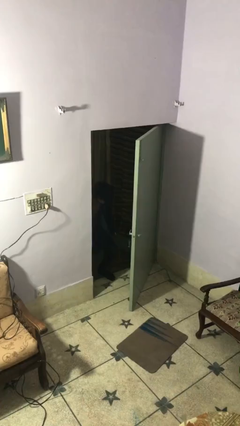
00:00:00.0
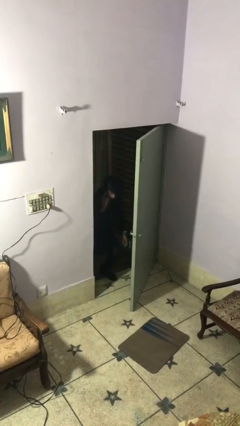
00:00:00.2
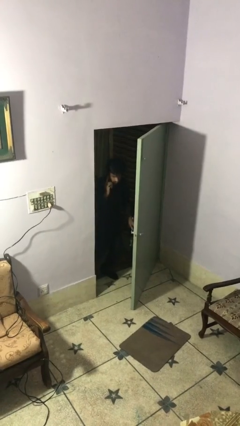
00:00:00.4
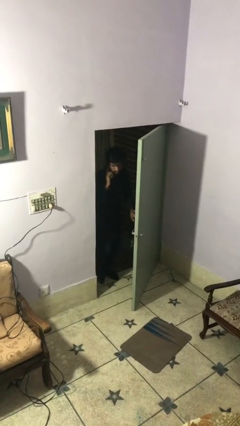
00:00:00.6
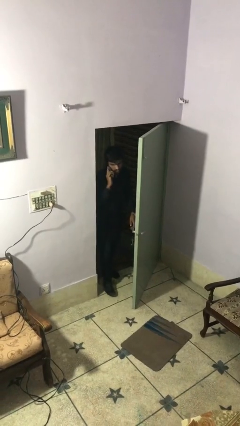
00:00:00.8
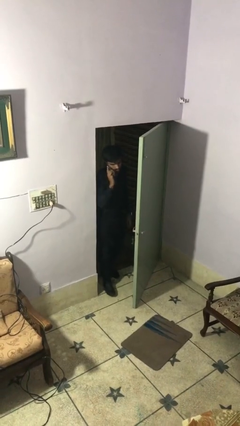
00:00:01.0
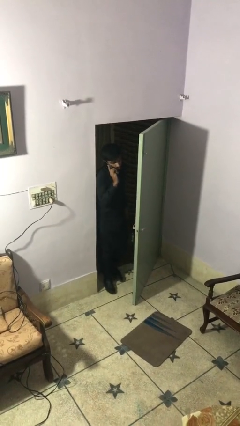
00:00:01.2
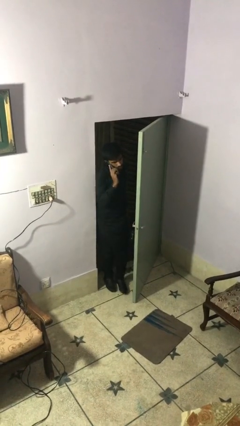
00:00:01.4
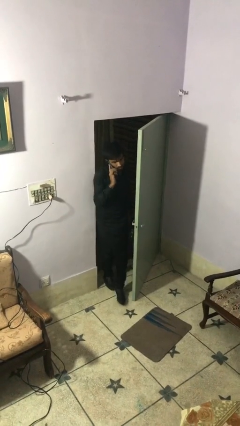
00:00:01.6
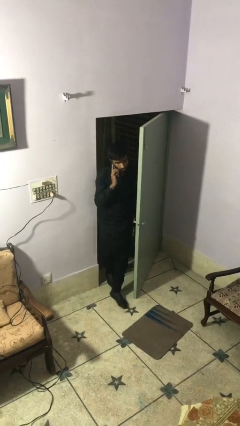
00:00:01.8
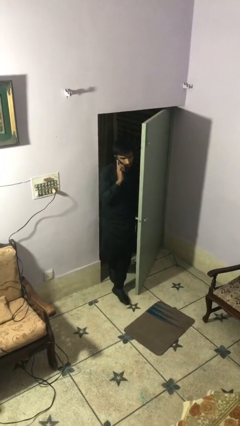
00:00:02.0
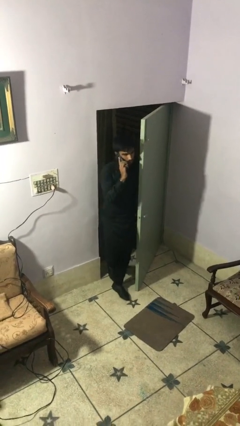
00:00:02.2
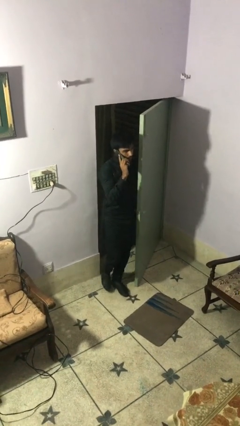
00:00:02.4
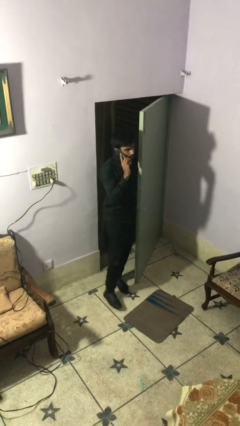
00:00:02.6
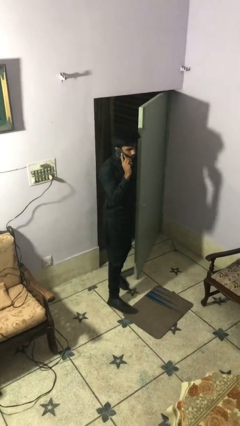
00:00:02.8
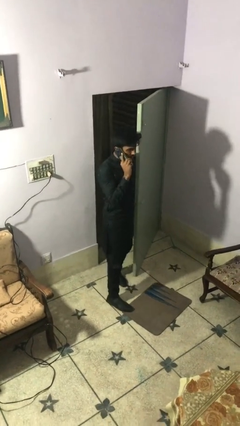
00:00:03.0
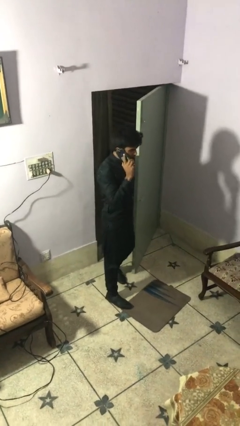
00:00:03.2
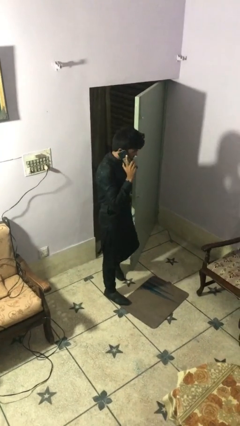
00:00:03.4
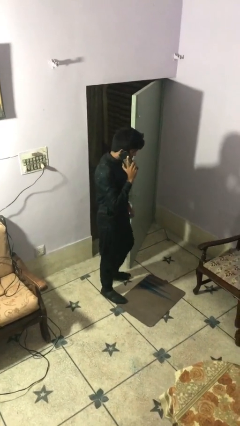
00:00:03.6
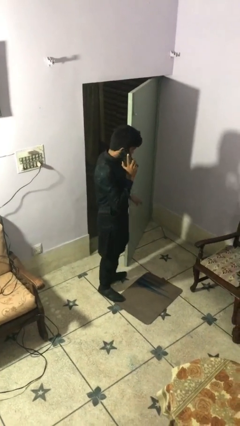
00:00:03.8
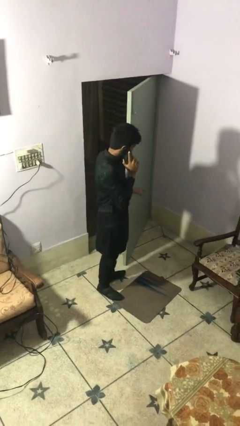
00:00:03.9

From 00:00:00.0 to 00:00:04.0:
person enters scene through structure

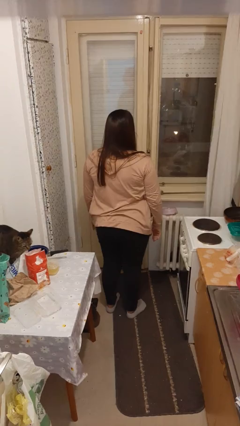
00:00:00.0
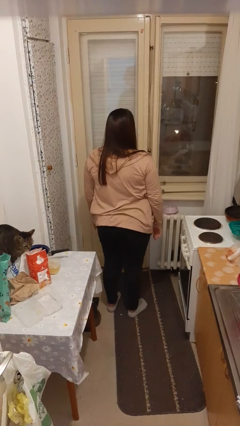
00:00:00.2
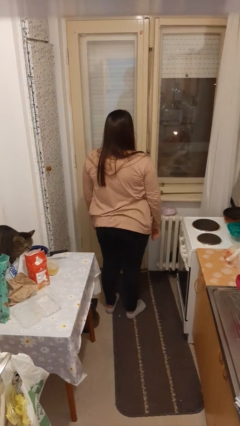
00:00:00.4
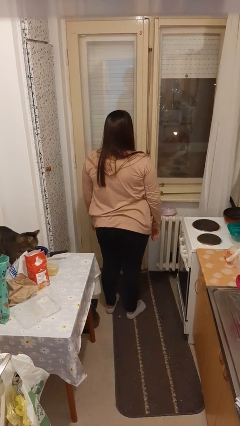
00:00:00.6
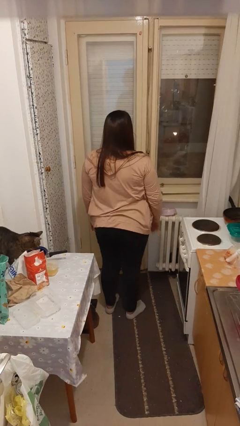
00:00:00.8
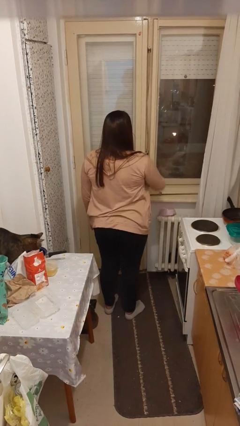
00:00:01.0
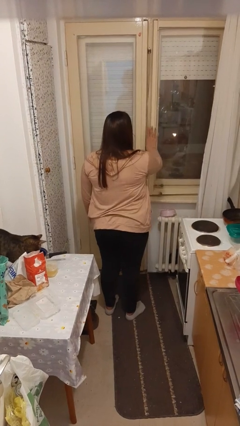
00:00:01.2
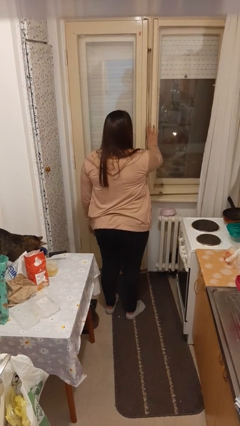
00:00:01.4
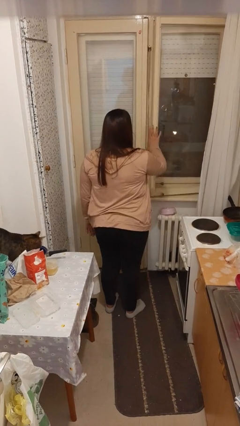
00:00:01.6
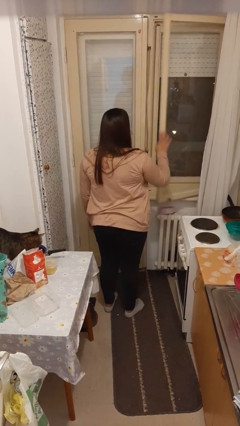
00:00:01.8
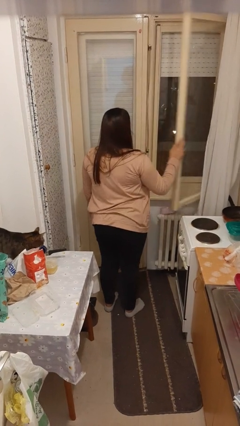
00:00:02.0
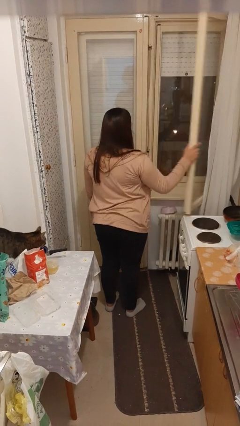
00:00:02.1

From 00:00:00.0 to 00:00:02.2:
person opens home window

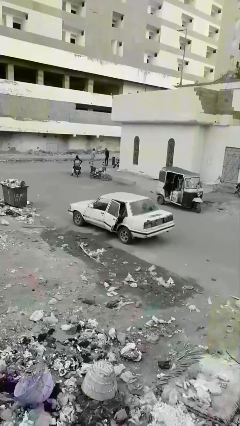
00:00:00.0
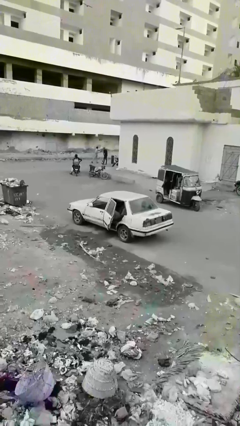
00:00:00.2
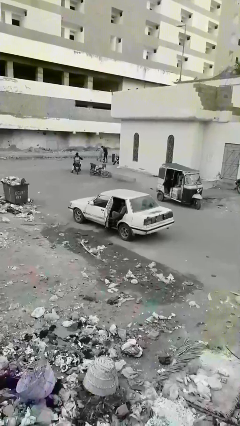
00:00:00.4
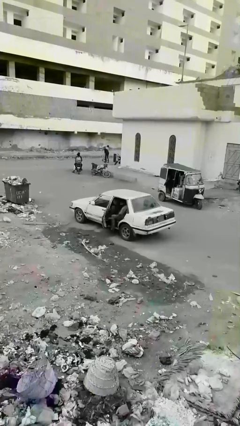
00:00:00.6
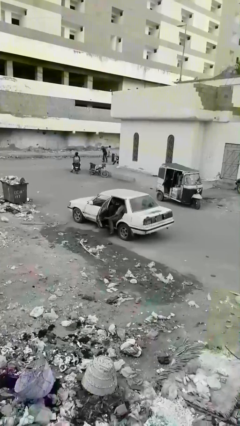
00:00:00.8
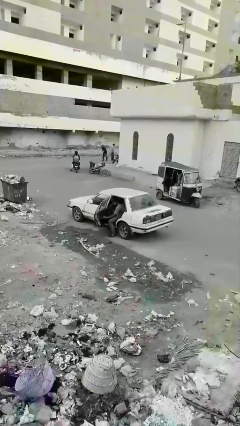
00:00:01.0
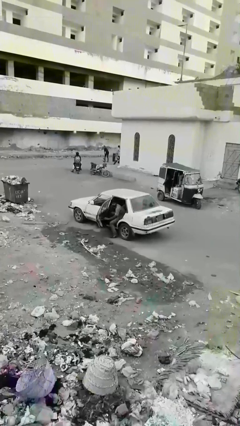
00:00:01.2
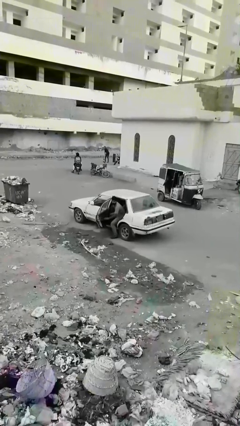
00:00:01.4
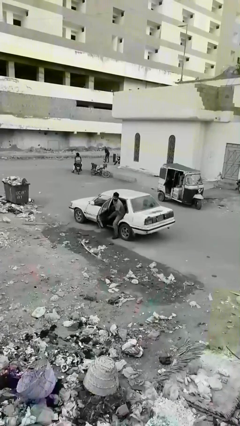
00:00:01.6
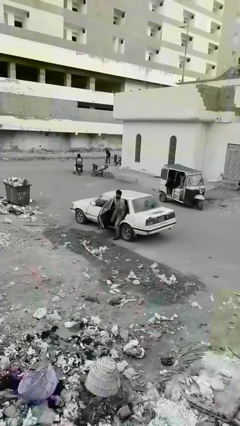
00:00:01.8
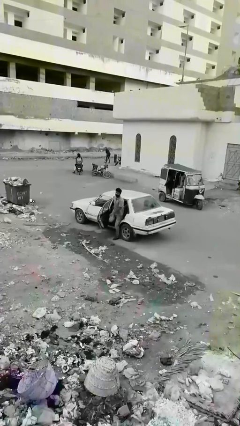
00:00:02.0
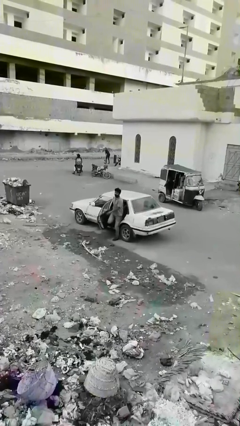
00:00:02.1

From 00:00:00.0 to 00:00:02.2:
car drops off person

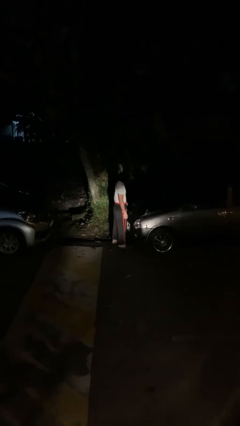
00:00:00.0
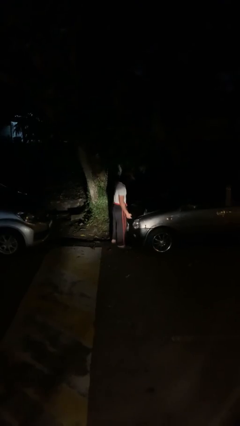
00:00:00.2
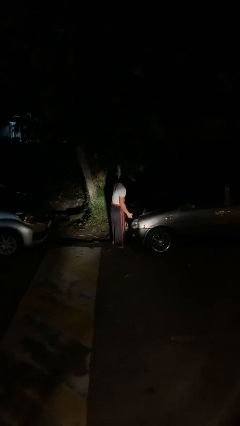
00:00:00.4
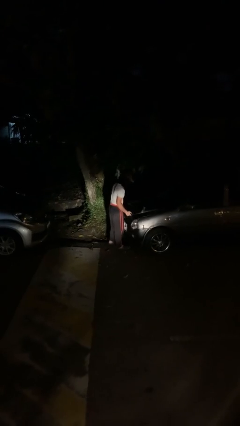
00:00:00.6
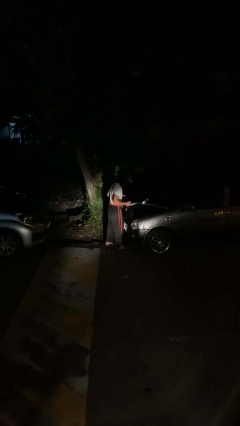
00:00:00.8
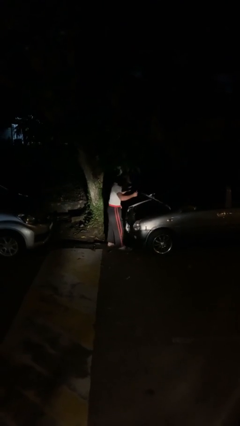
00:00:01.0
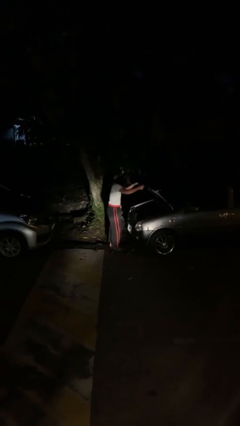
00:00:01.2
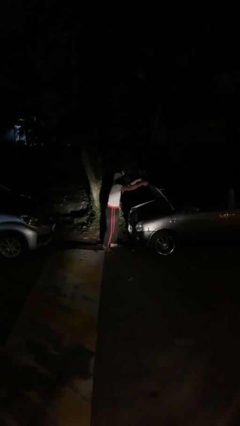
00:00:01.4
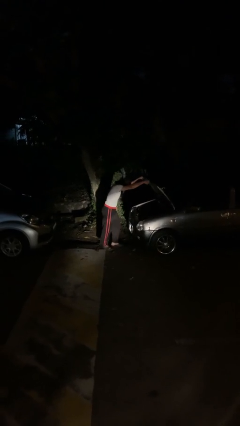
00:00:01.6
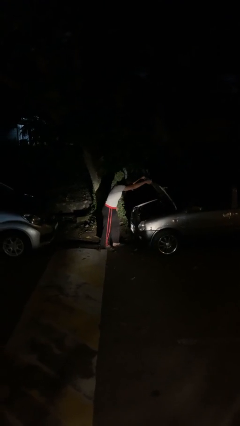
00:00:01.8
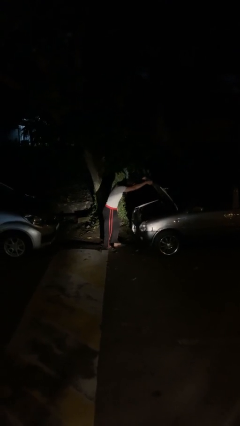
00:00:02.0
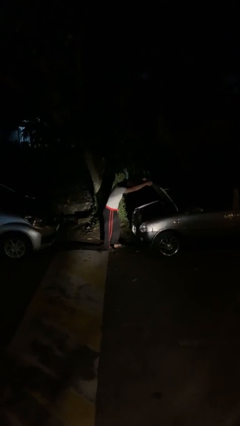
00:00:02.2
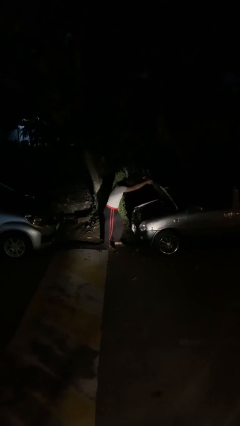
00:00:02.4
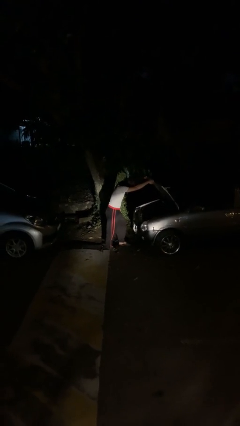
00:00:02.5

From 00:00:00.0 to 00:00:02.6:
person opens car hood

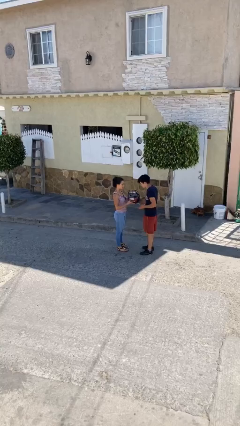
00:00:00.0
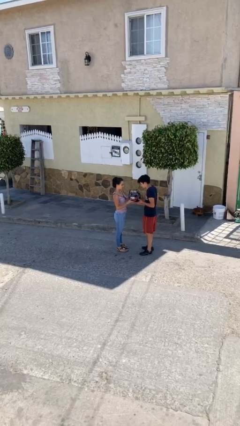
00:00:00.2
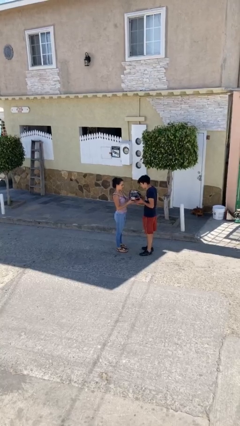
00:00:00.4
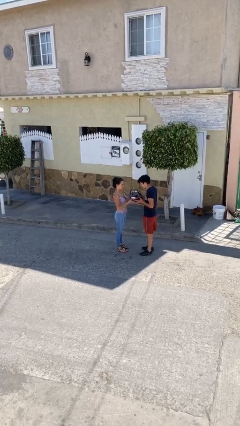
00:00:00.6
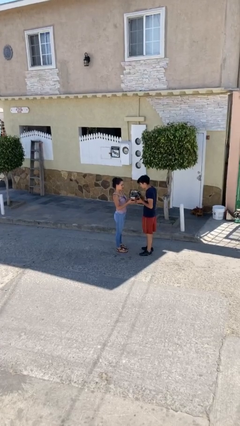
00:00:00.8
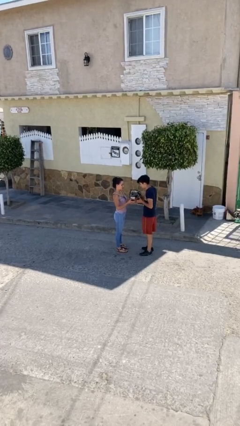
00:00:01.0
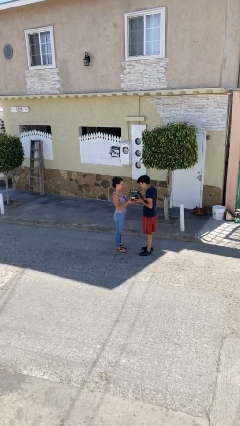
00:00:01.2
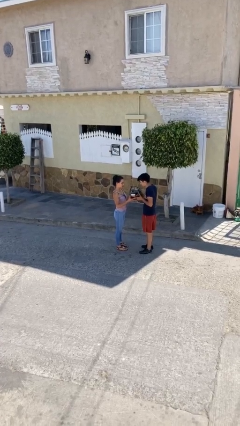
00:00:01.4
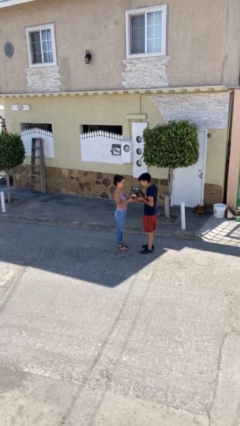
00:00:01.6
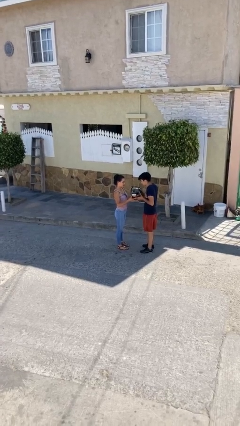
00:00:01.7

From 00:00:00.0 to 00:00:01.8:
person transfers object to person

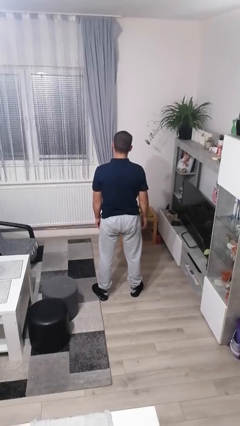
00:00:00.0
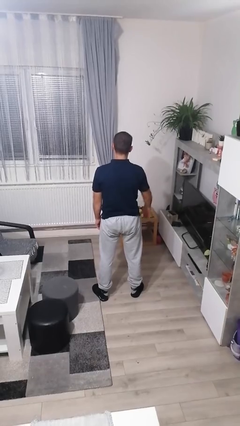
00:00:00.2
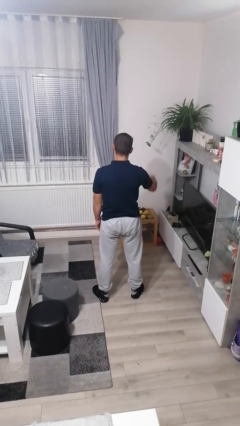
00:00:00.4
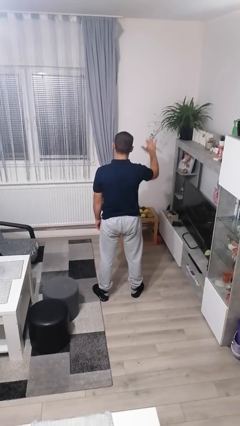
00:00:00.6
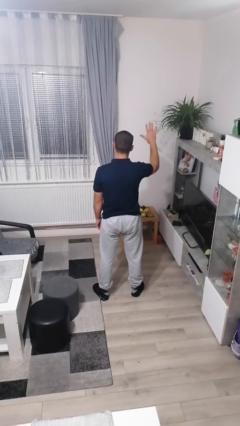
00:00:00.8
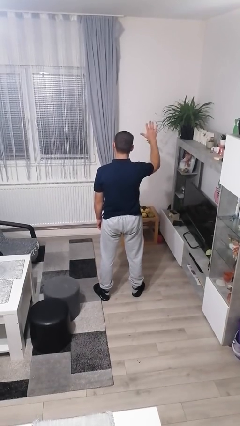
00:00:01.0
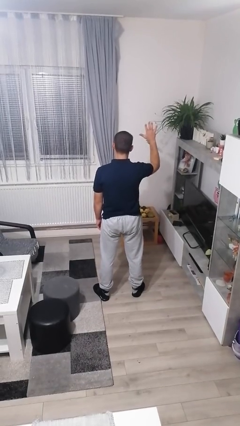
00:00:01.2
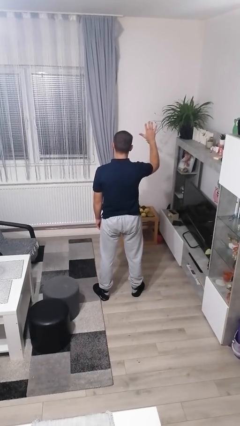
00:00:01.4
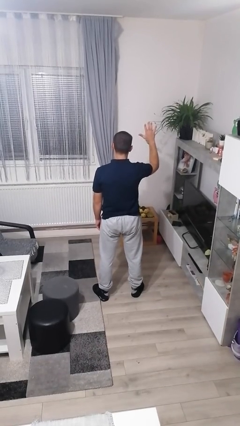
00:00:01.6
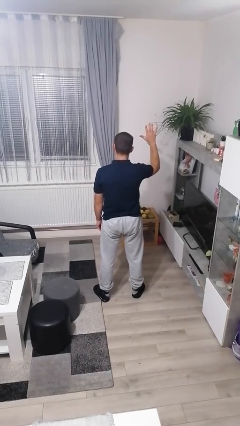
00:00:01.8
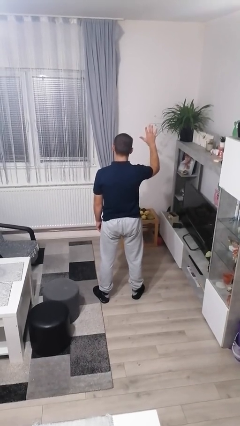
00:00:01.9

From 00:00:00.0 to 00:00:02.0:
person gestures number five

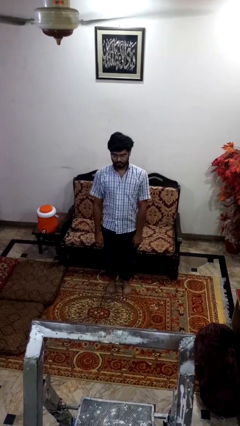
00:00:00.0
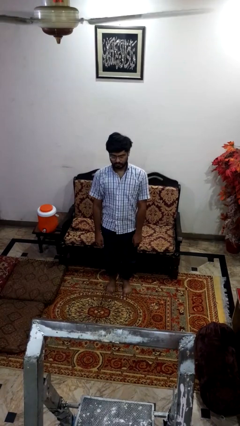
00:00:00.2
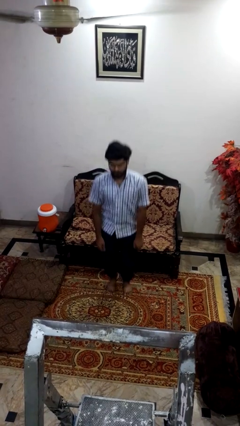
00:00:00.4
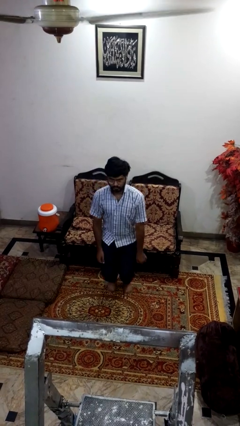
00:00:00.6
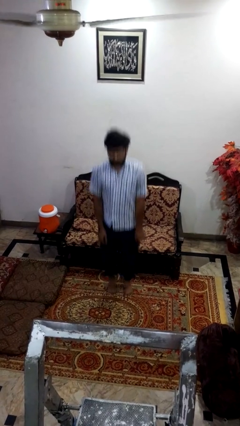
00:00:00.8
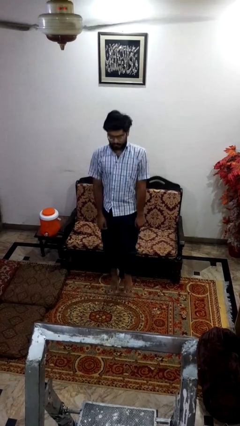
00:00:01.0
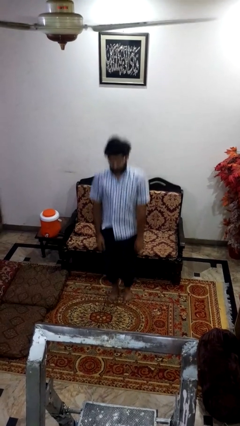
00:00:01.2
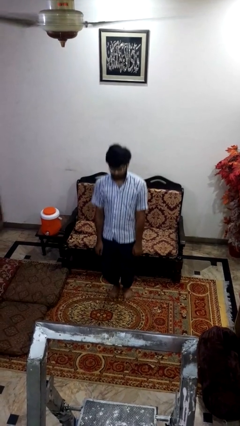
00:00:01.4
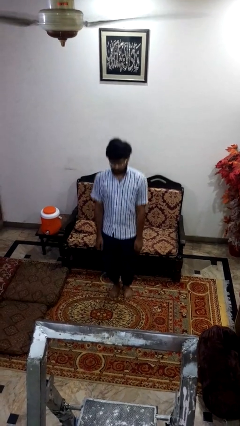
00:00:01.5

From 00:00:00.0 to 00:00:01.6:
person jumps

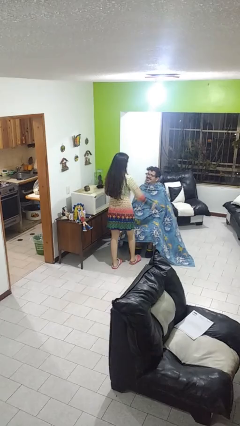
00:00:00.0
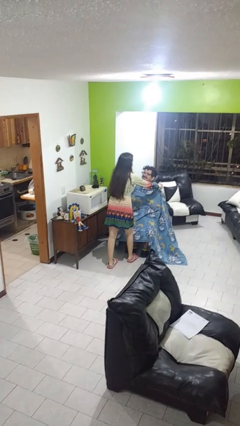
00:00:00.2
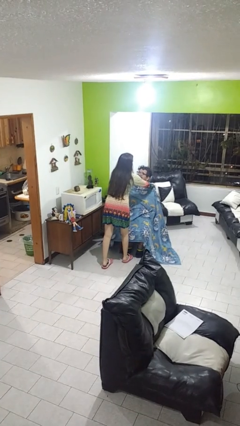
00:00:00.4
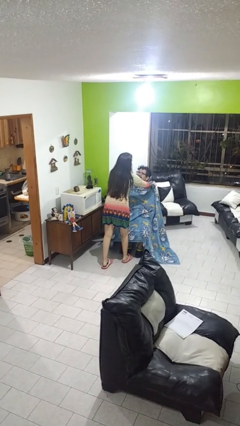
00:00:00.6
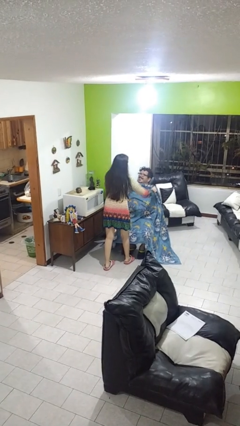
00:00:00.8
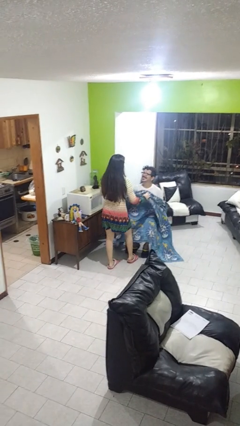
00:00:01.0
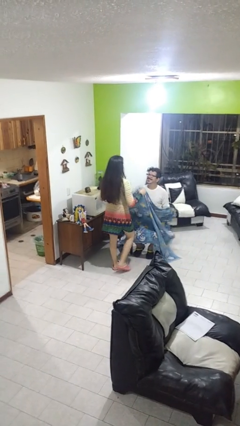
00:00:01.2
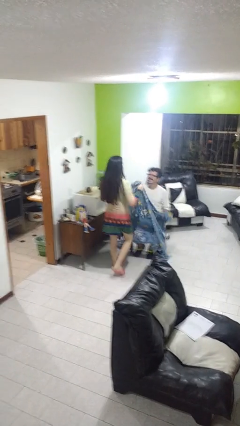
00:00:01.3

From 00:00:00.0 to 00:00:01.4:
person uncovers friend with blanket
